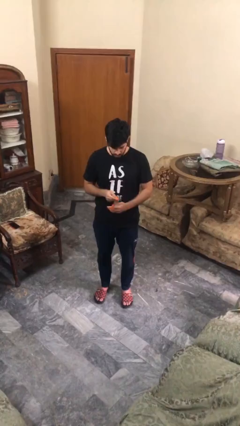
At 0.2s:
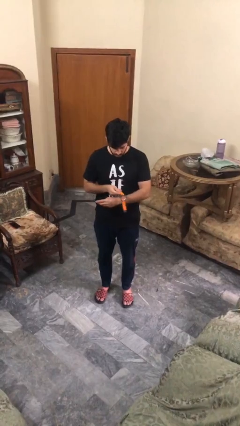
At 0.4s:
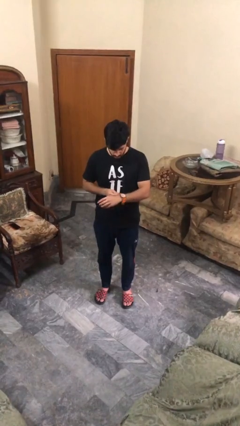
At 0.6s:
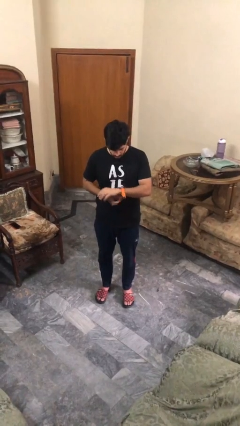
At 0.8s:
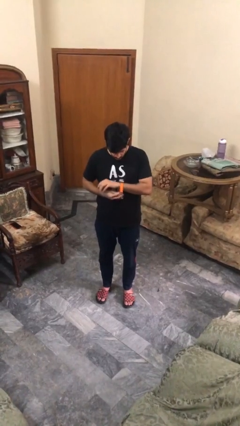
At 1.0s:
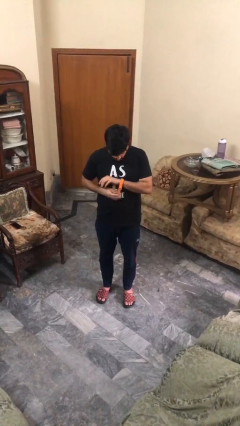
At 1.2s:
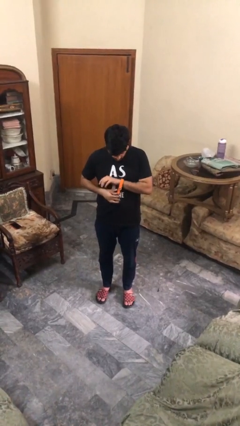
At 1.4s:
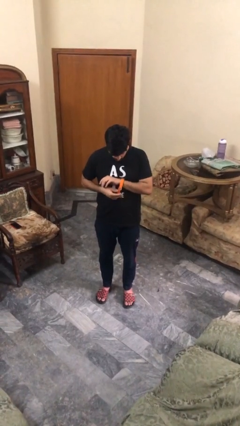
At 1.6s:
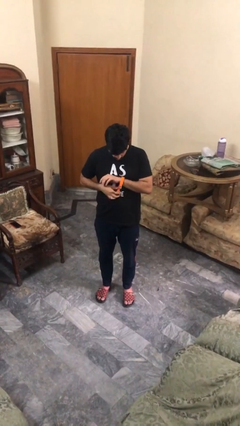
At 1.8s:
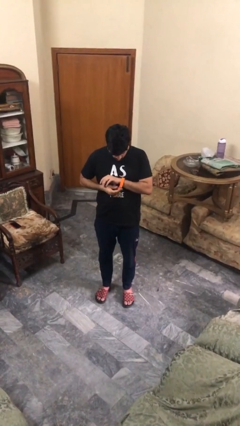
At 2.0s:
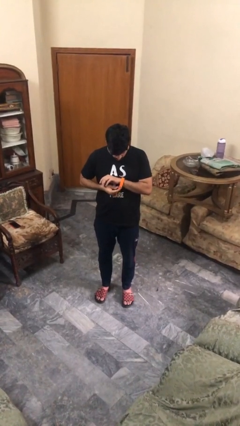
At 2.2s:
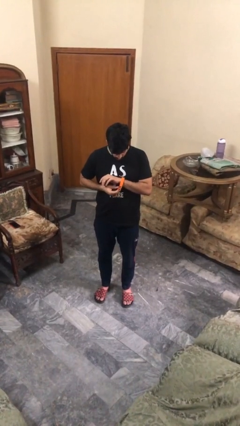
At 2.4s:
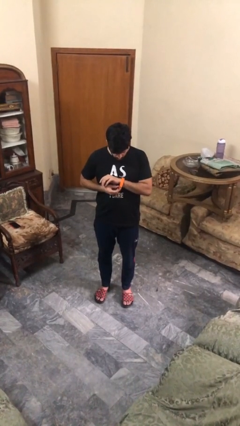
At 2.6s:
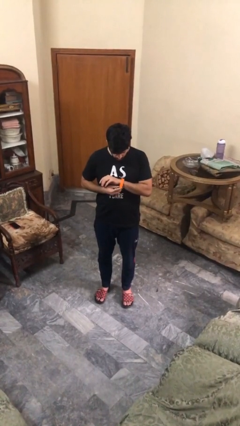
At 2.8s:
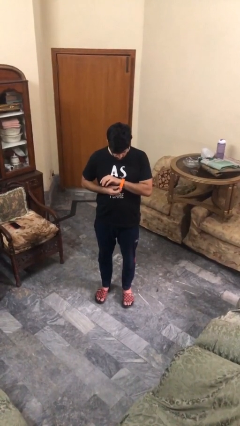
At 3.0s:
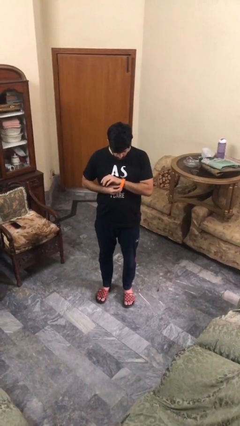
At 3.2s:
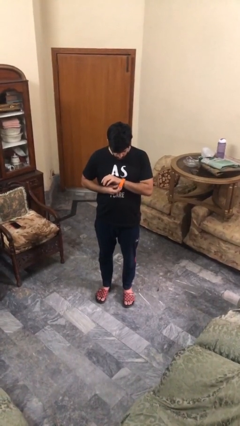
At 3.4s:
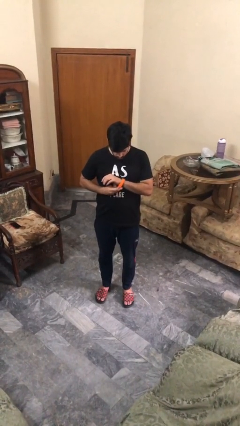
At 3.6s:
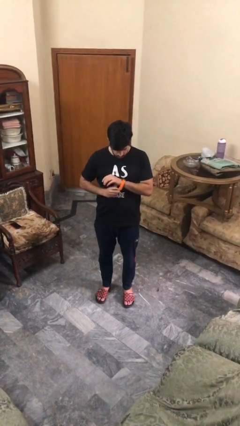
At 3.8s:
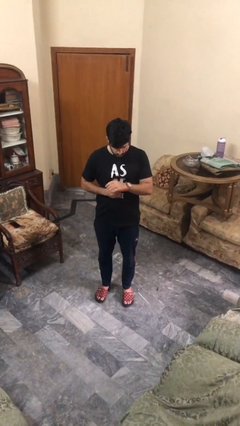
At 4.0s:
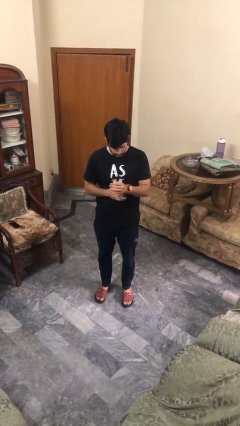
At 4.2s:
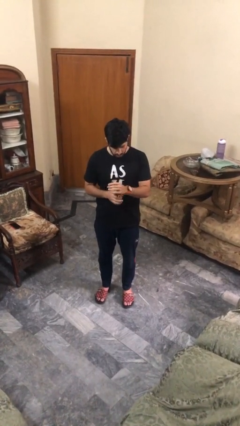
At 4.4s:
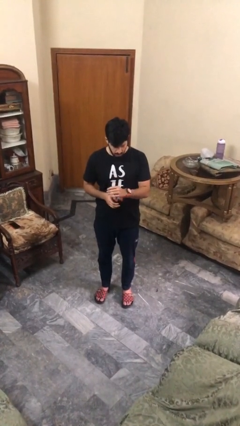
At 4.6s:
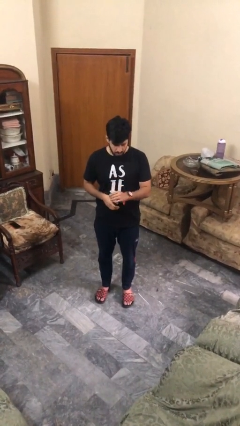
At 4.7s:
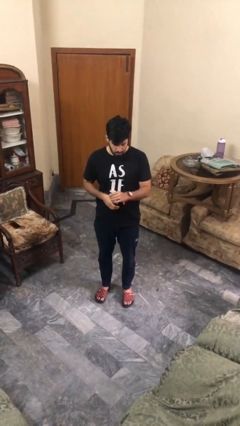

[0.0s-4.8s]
person puts on wristwatch

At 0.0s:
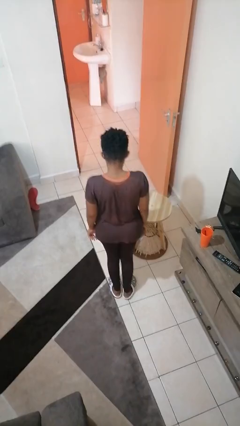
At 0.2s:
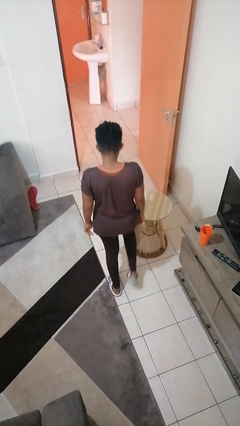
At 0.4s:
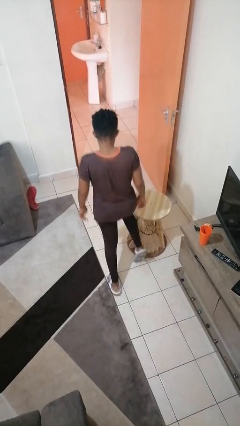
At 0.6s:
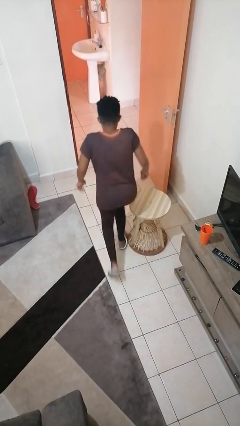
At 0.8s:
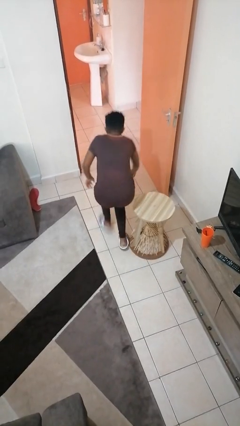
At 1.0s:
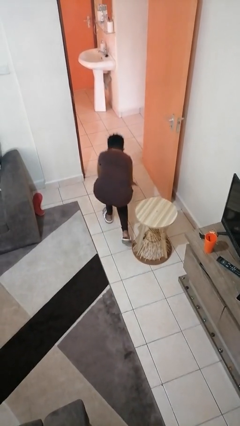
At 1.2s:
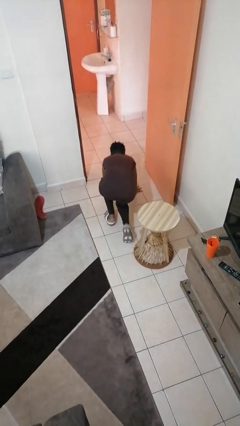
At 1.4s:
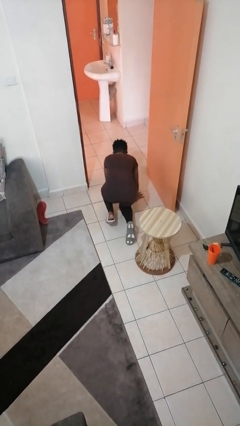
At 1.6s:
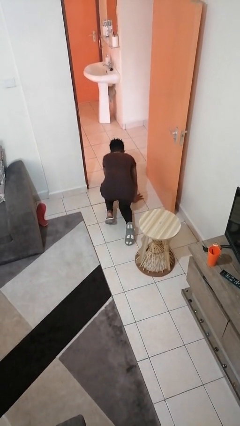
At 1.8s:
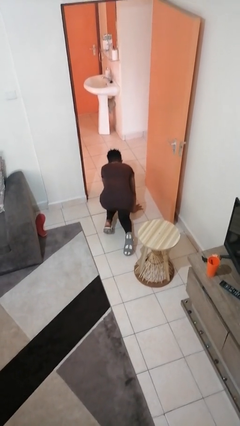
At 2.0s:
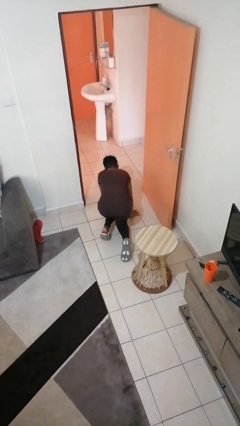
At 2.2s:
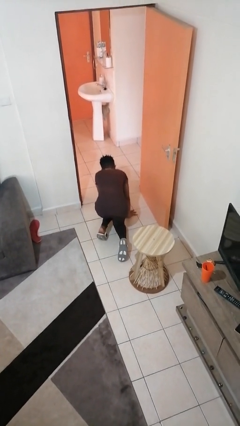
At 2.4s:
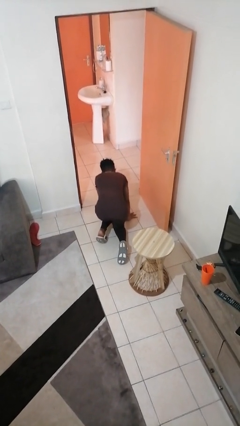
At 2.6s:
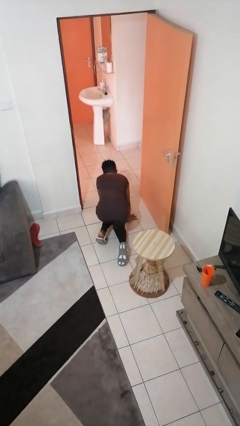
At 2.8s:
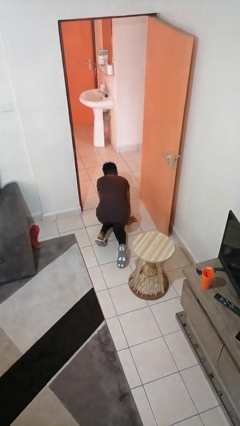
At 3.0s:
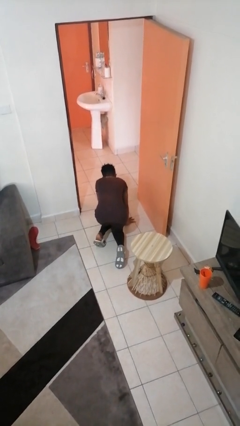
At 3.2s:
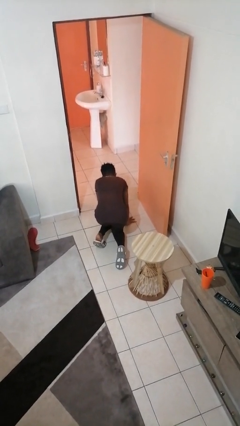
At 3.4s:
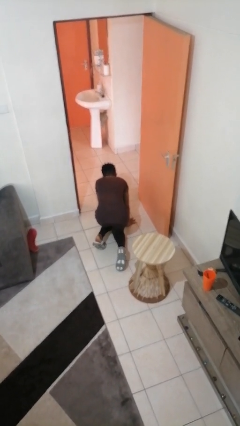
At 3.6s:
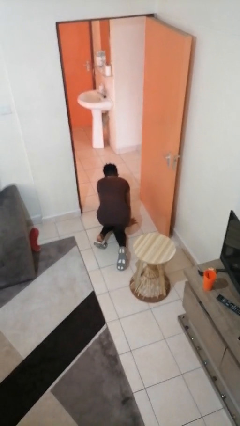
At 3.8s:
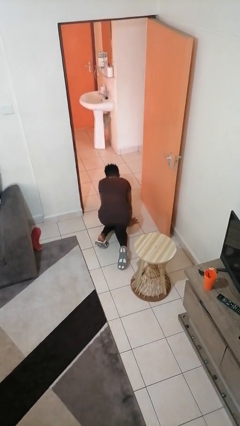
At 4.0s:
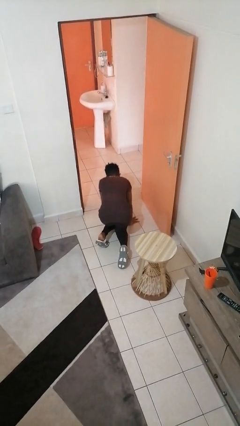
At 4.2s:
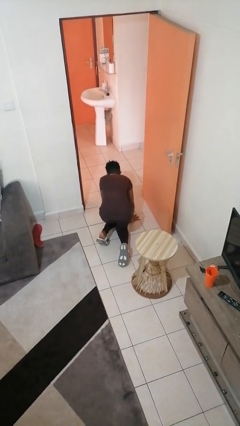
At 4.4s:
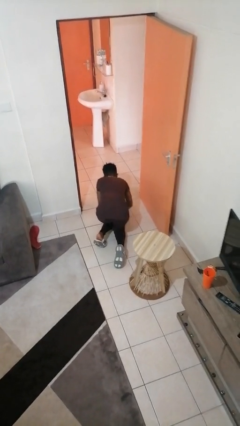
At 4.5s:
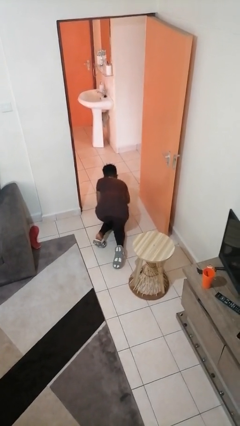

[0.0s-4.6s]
person trips on object on floor

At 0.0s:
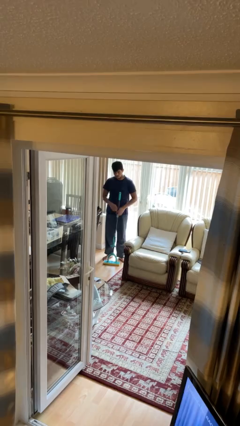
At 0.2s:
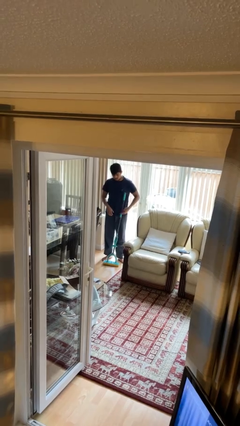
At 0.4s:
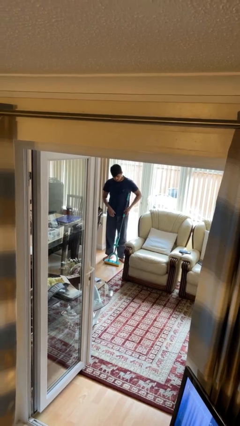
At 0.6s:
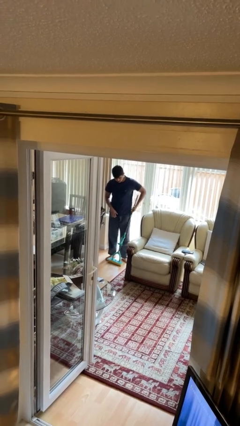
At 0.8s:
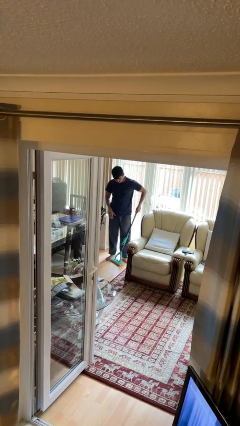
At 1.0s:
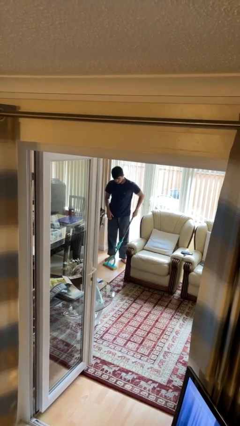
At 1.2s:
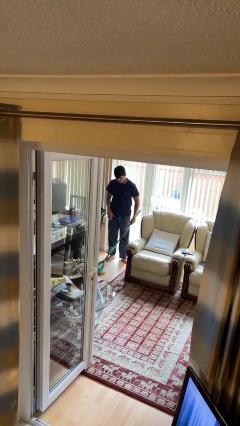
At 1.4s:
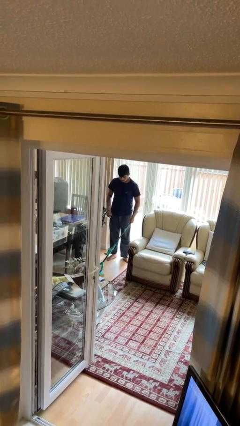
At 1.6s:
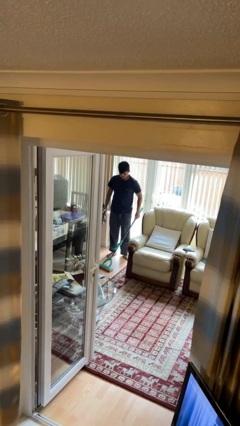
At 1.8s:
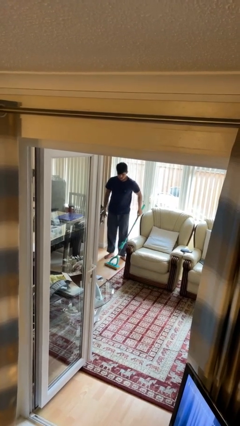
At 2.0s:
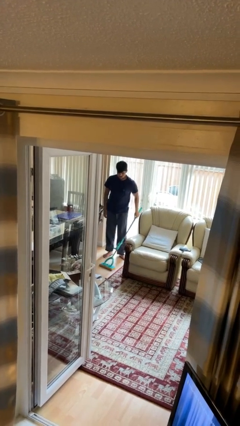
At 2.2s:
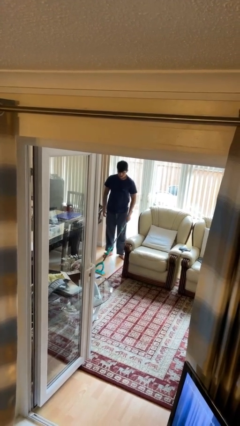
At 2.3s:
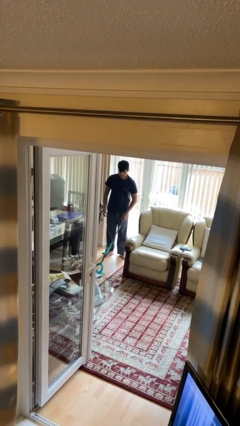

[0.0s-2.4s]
person mops

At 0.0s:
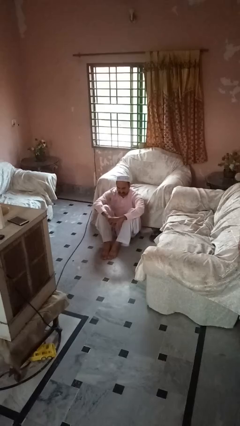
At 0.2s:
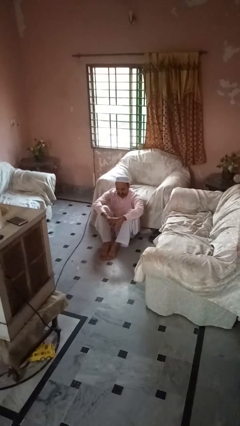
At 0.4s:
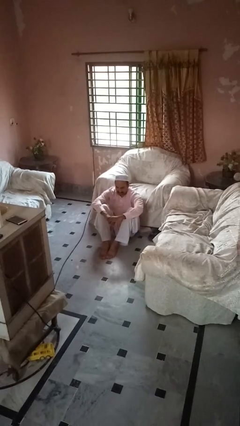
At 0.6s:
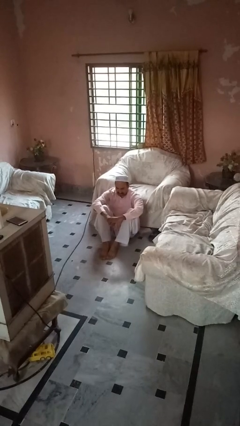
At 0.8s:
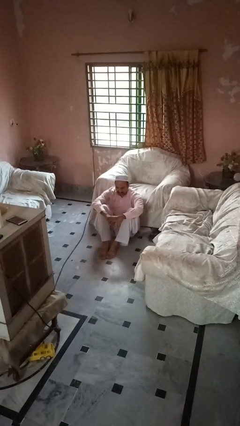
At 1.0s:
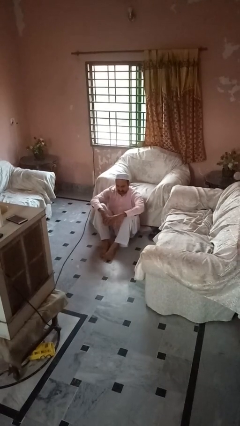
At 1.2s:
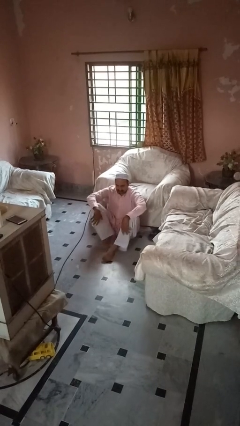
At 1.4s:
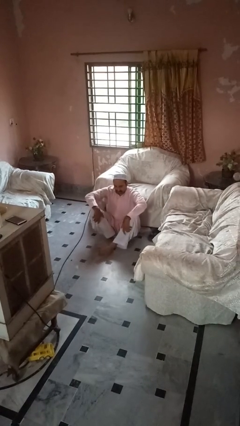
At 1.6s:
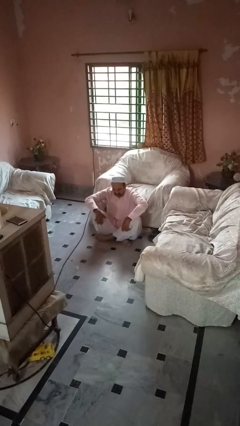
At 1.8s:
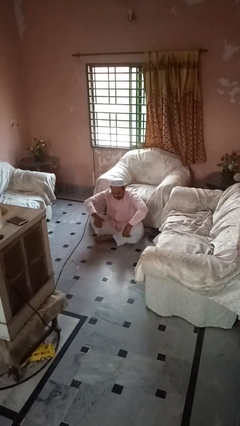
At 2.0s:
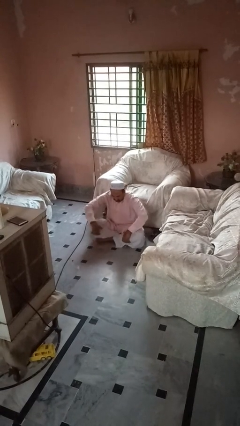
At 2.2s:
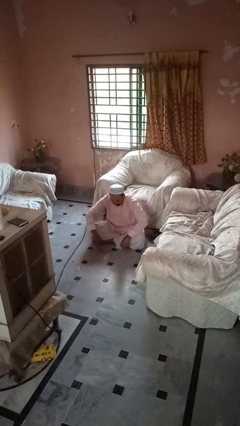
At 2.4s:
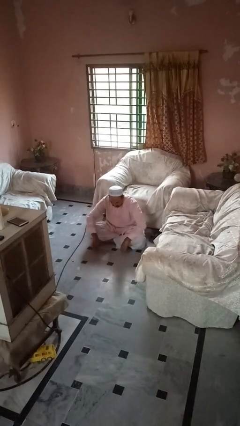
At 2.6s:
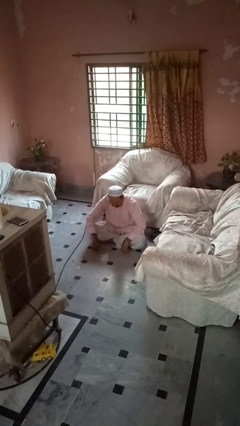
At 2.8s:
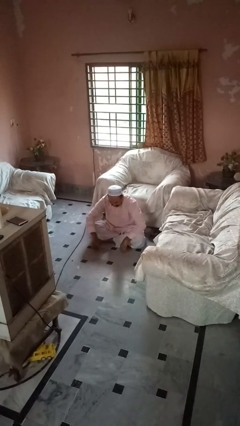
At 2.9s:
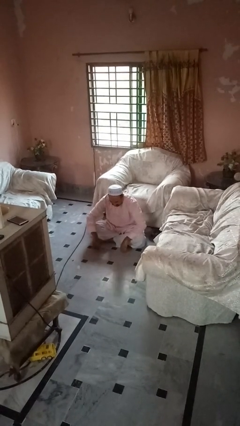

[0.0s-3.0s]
person crosses legs

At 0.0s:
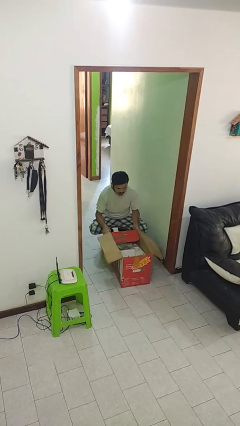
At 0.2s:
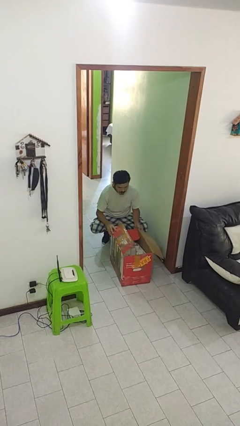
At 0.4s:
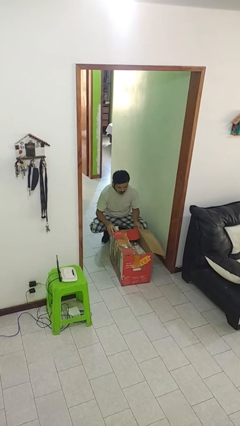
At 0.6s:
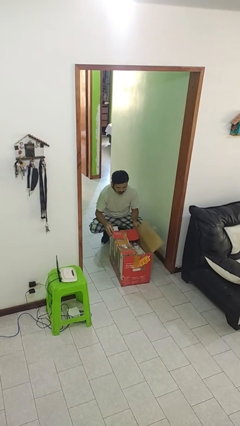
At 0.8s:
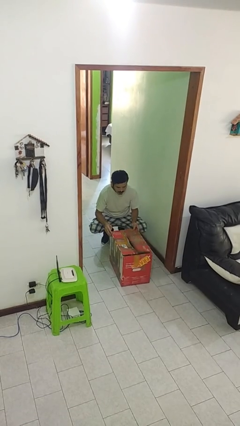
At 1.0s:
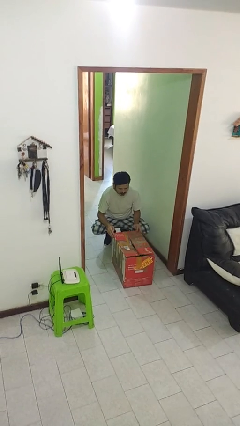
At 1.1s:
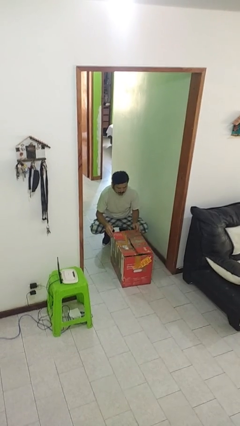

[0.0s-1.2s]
person closes box

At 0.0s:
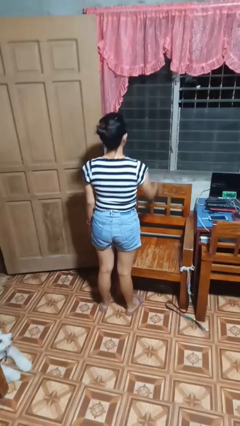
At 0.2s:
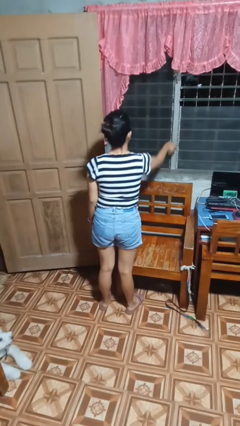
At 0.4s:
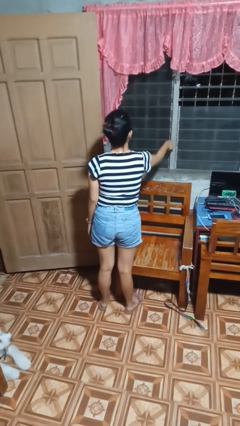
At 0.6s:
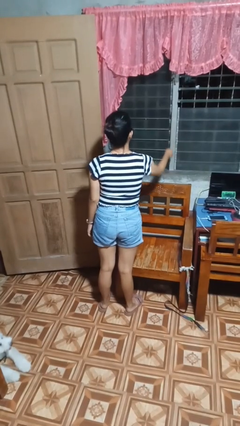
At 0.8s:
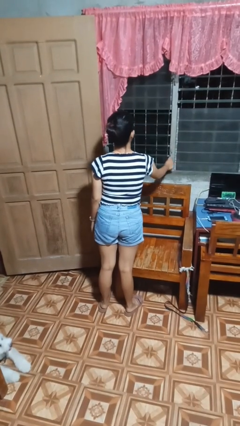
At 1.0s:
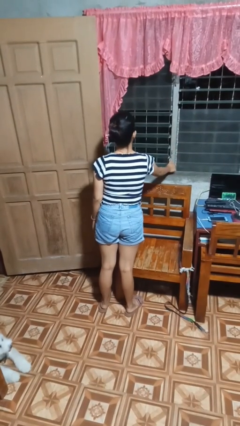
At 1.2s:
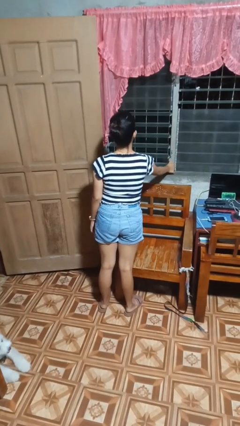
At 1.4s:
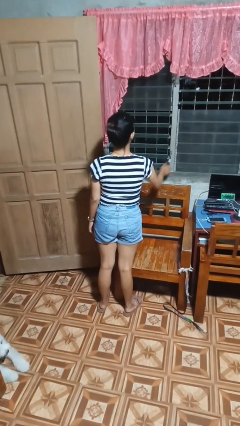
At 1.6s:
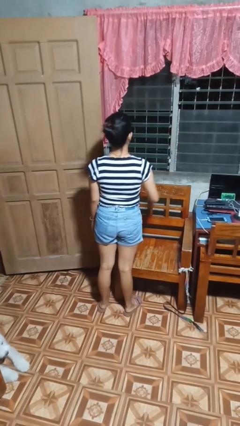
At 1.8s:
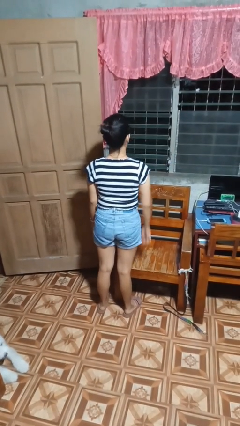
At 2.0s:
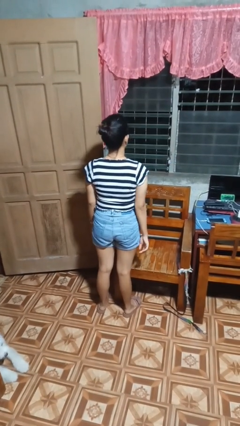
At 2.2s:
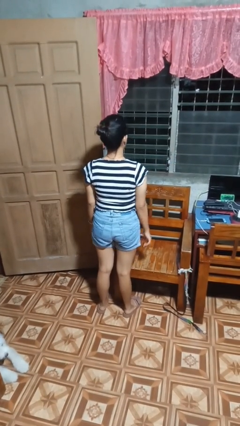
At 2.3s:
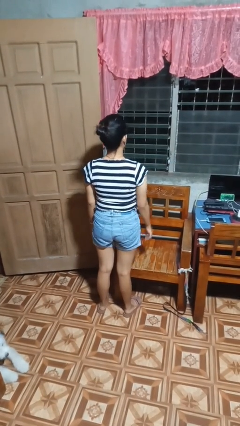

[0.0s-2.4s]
person opens home window
